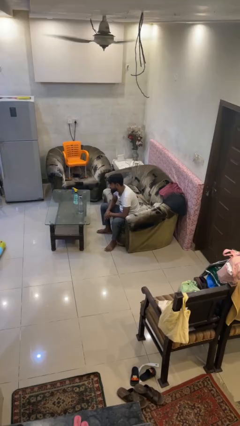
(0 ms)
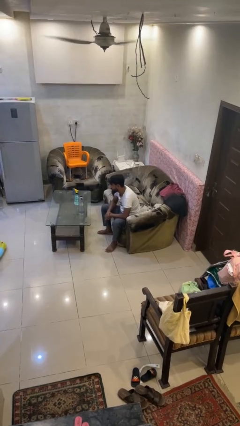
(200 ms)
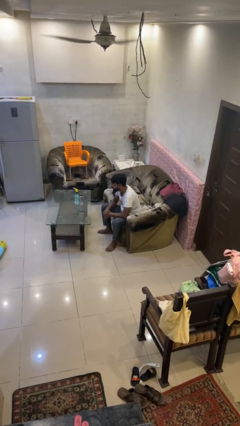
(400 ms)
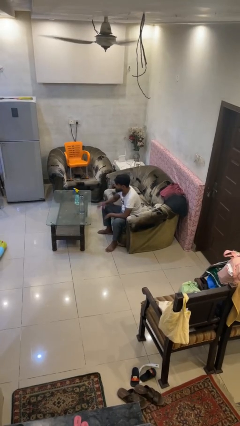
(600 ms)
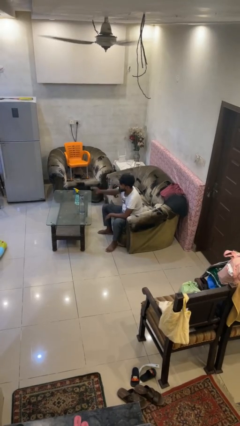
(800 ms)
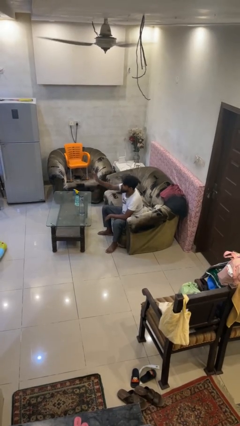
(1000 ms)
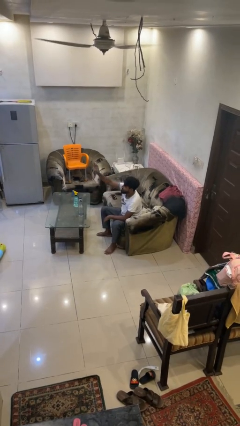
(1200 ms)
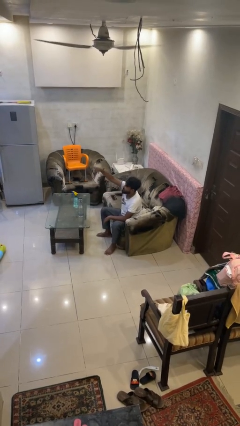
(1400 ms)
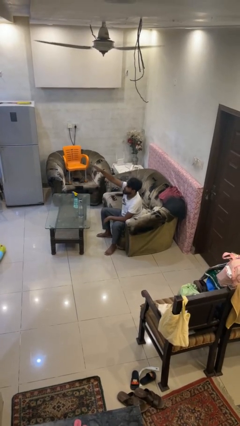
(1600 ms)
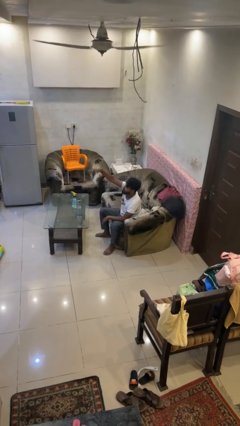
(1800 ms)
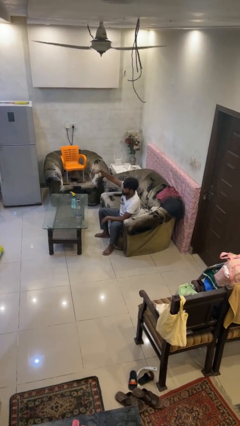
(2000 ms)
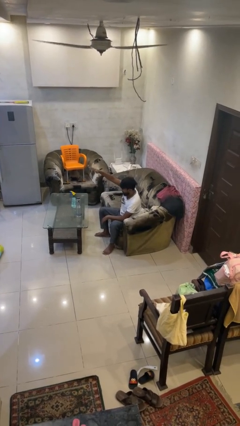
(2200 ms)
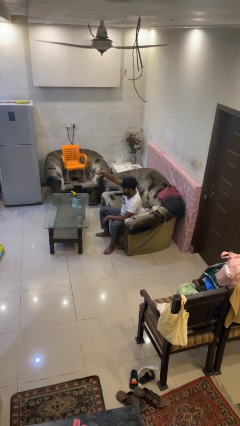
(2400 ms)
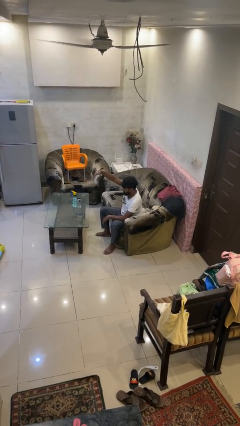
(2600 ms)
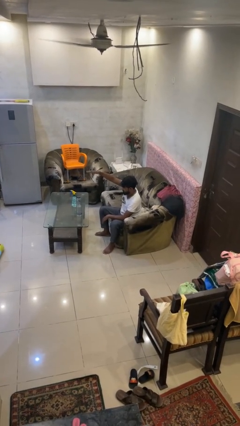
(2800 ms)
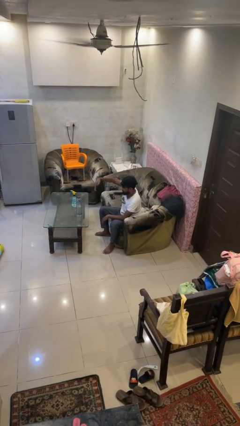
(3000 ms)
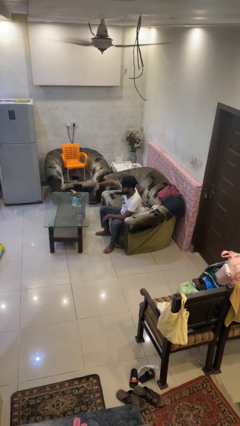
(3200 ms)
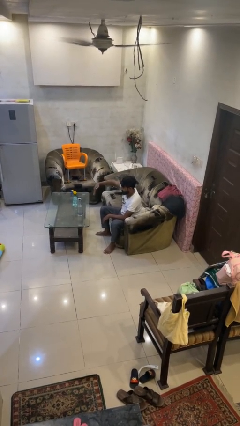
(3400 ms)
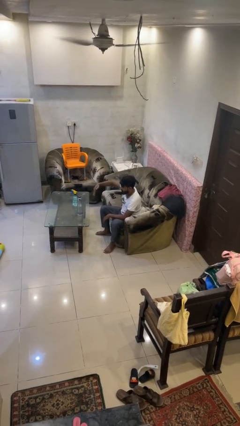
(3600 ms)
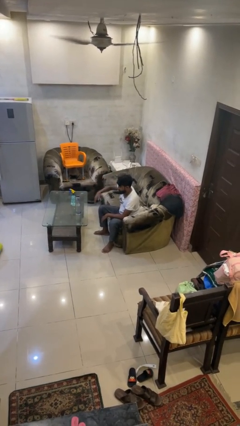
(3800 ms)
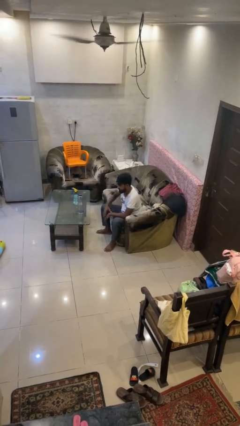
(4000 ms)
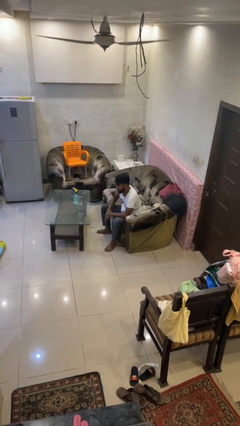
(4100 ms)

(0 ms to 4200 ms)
person gestures come here

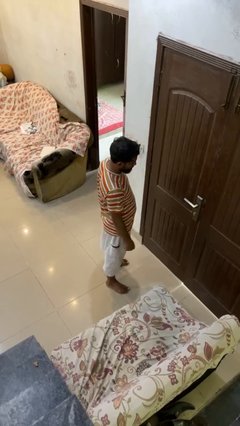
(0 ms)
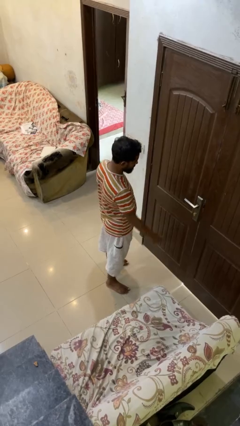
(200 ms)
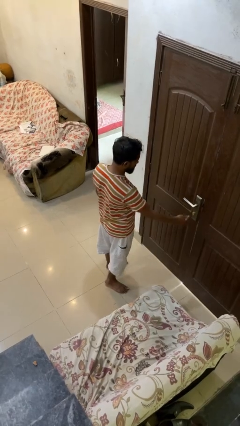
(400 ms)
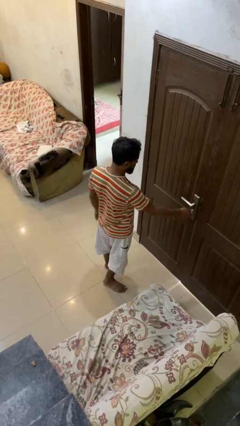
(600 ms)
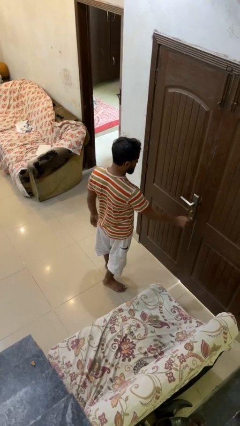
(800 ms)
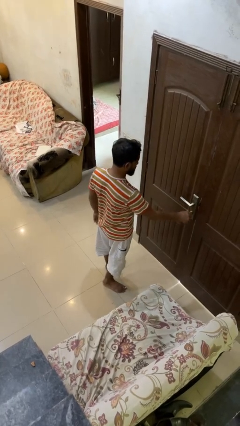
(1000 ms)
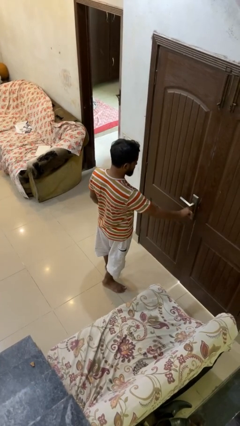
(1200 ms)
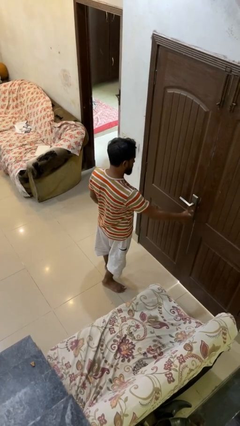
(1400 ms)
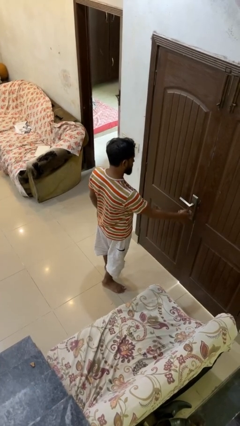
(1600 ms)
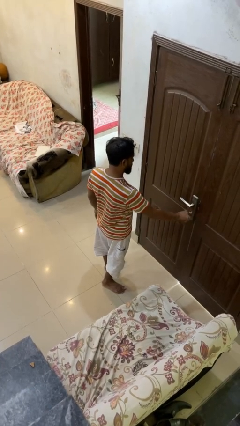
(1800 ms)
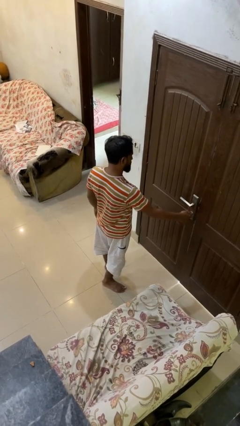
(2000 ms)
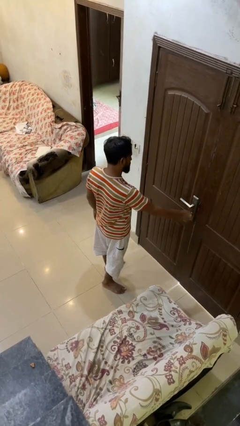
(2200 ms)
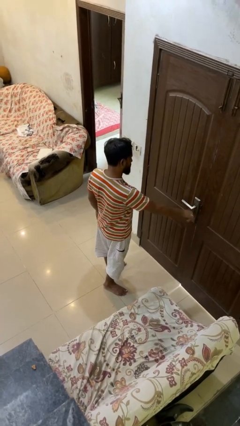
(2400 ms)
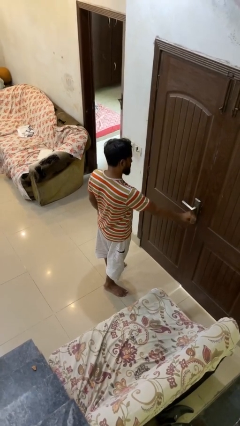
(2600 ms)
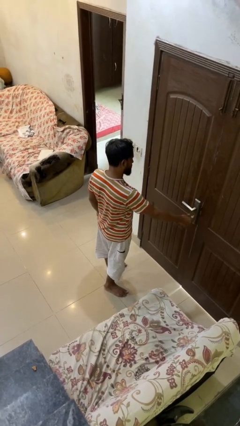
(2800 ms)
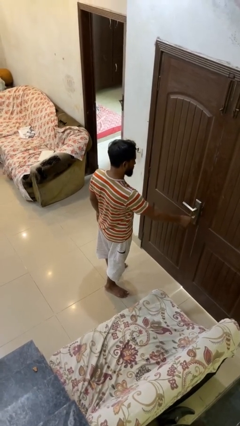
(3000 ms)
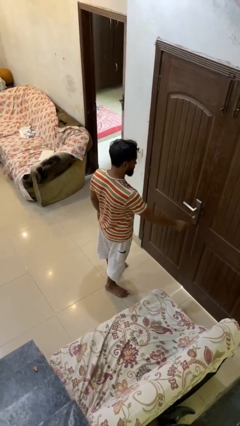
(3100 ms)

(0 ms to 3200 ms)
person unlocks door with keys

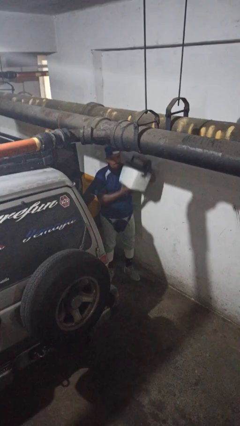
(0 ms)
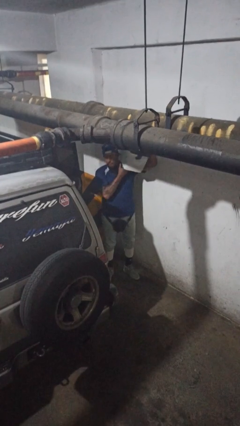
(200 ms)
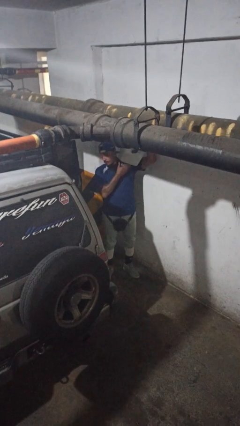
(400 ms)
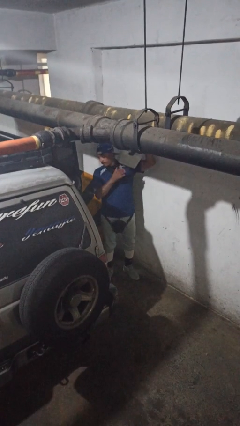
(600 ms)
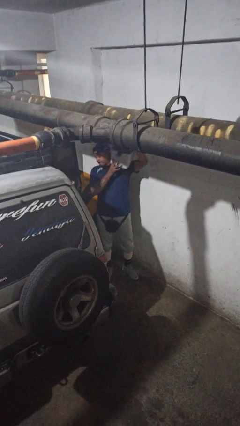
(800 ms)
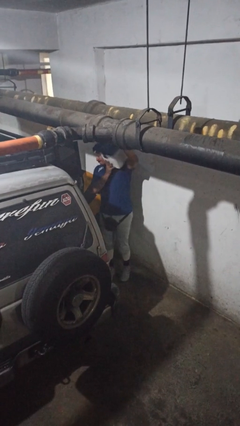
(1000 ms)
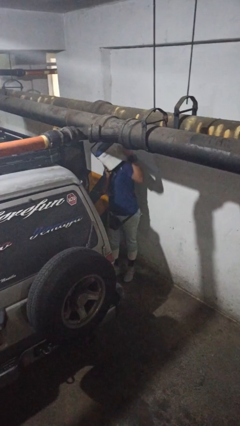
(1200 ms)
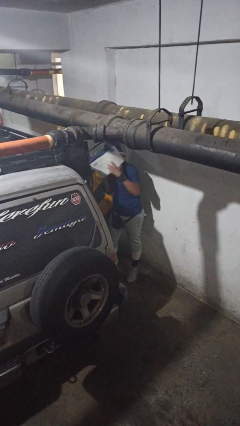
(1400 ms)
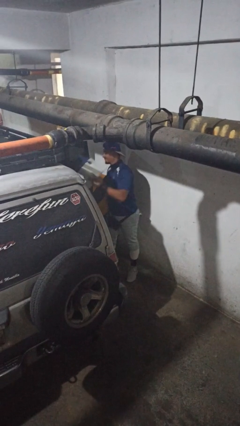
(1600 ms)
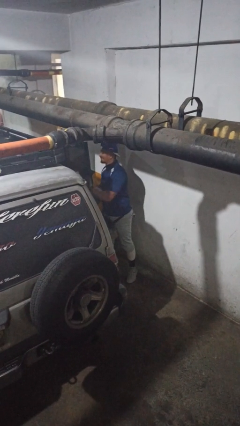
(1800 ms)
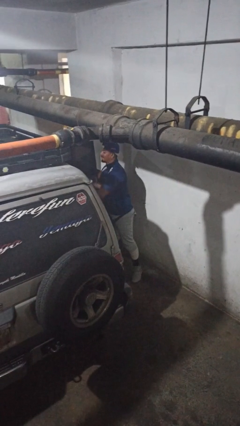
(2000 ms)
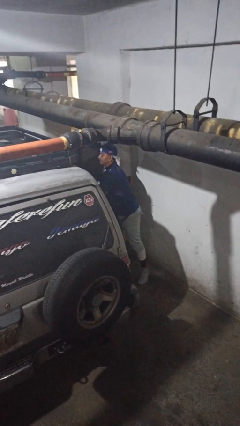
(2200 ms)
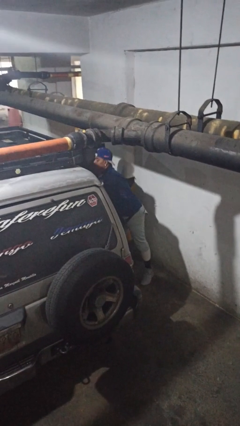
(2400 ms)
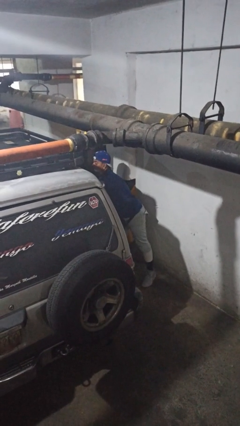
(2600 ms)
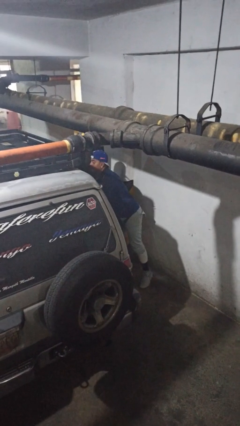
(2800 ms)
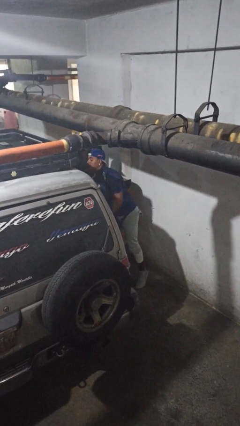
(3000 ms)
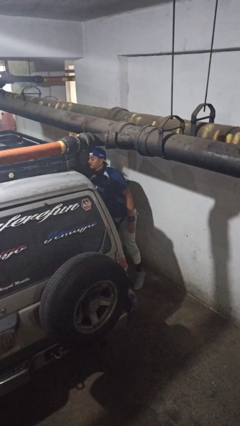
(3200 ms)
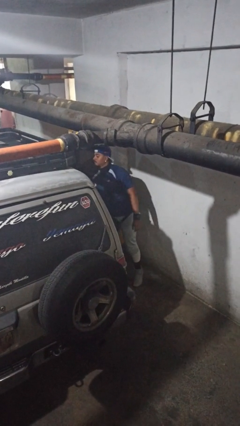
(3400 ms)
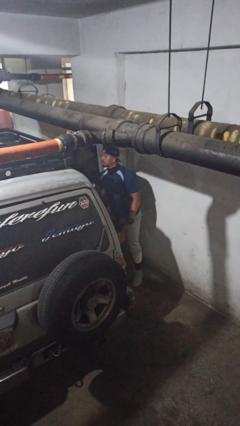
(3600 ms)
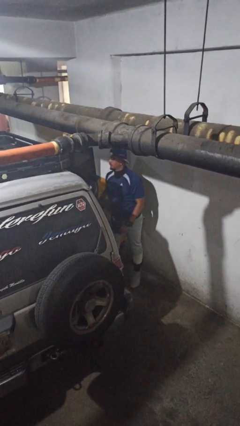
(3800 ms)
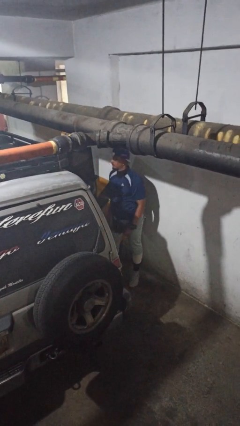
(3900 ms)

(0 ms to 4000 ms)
person loads car

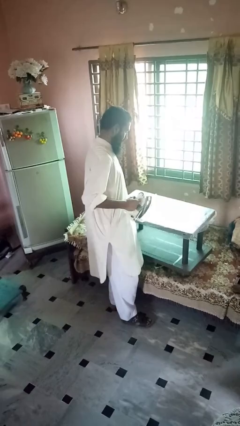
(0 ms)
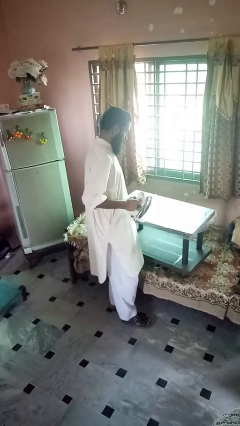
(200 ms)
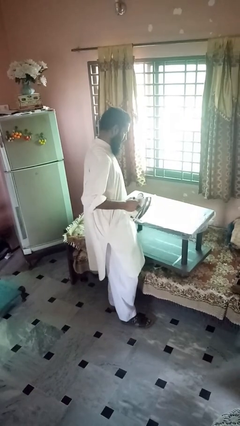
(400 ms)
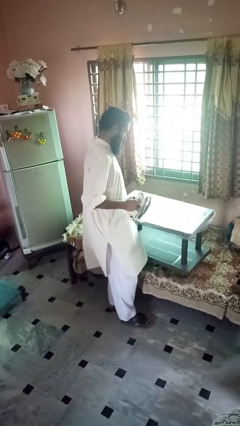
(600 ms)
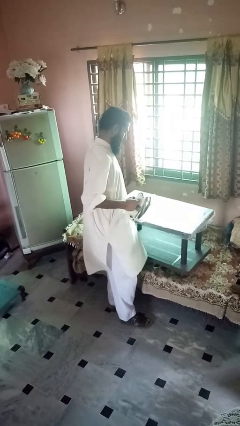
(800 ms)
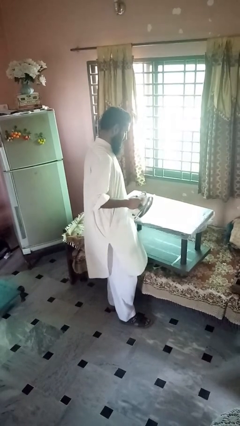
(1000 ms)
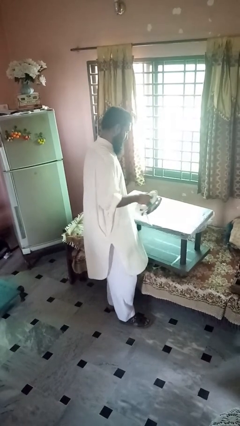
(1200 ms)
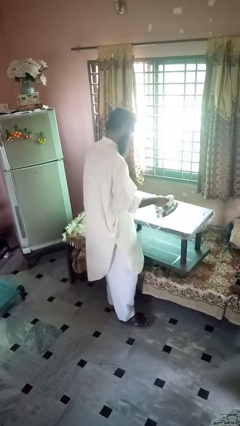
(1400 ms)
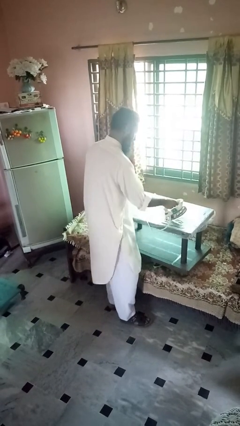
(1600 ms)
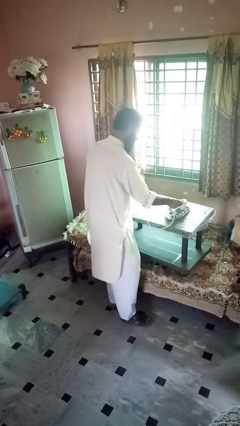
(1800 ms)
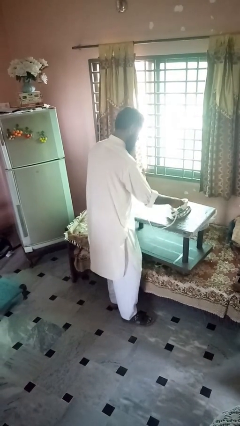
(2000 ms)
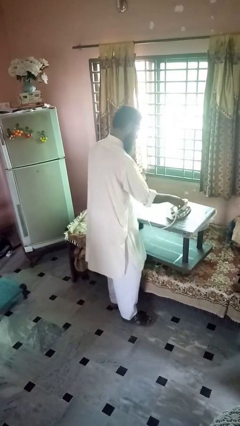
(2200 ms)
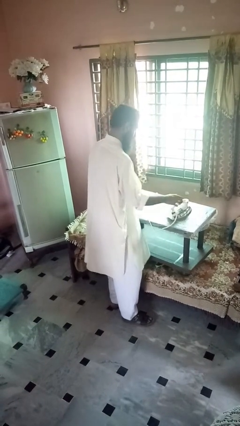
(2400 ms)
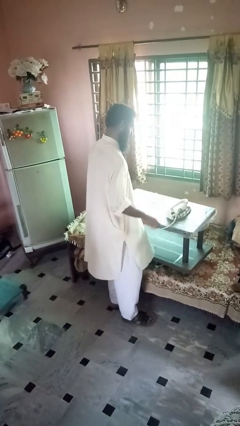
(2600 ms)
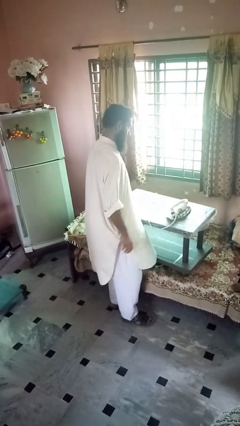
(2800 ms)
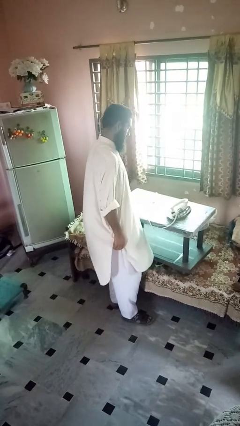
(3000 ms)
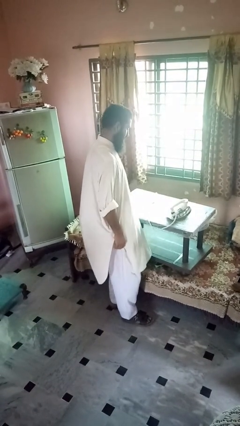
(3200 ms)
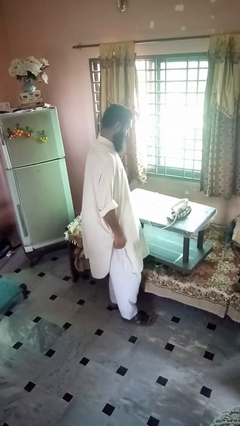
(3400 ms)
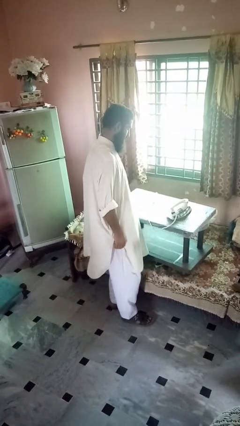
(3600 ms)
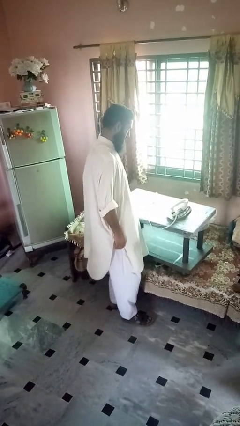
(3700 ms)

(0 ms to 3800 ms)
person puts down object on countertop

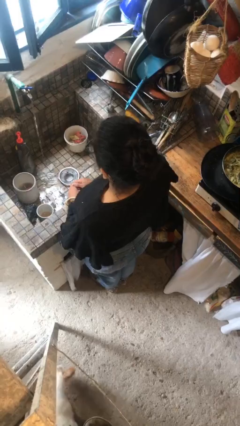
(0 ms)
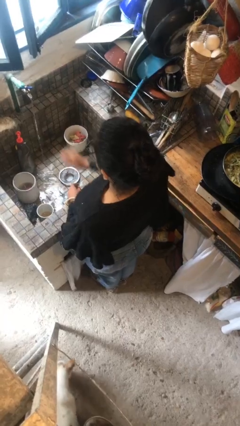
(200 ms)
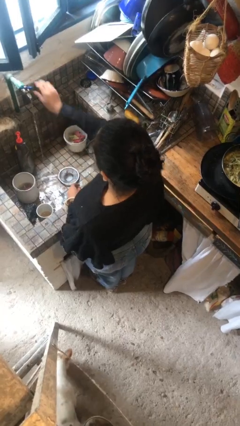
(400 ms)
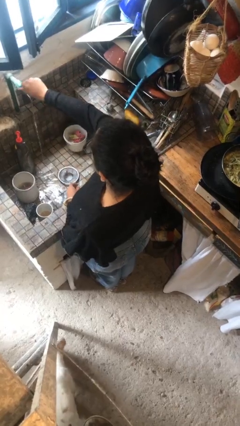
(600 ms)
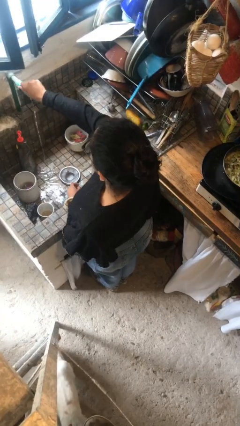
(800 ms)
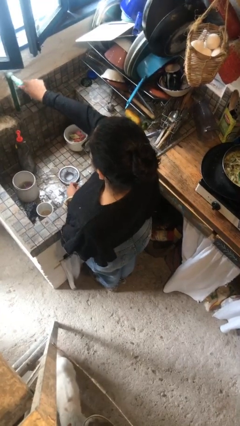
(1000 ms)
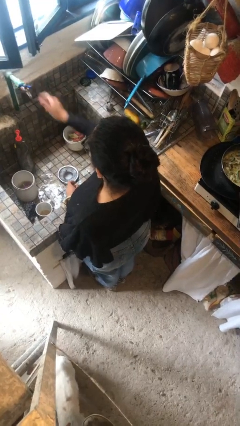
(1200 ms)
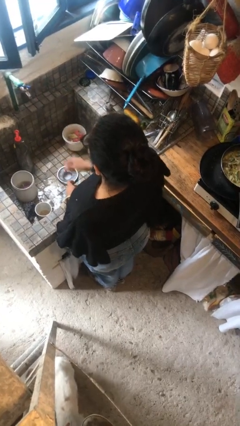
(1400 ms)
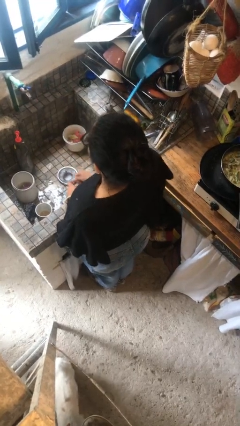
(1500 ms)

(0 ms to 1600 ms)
person turns off faucet

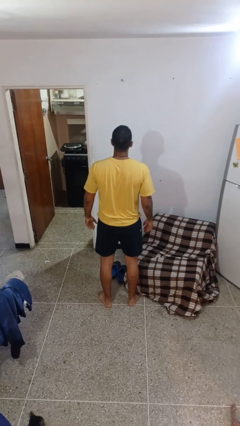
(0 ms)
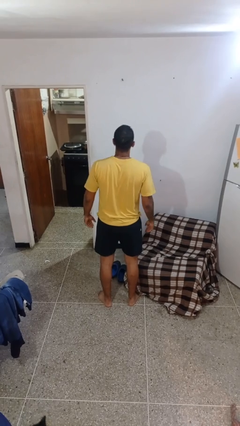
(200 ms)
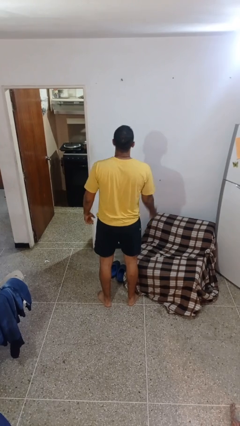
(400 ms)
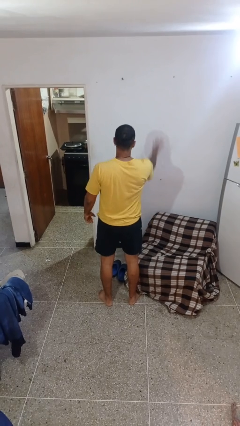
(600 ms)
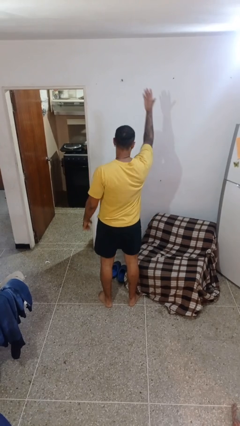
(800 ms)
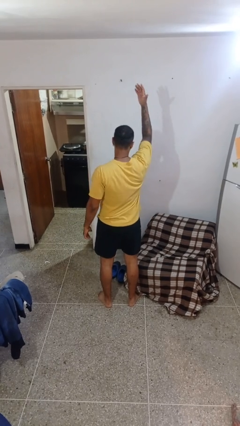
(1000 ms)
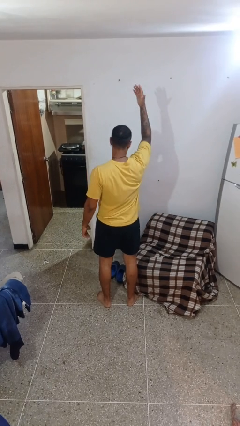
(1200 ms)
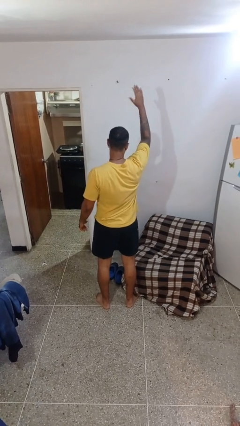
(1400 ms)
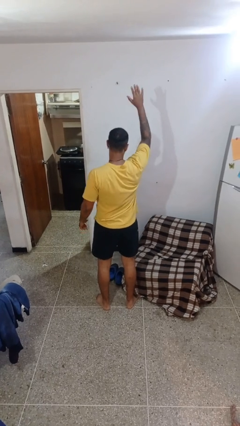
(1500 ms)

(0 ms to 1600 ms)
person gestures swipe up
